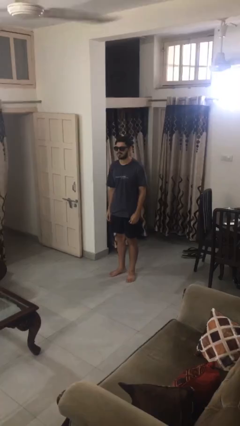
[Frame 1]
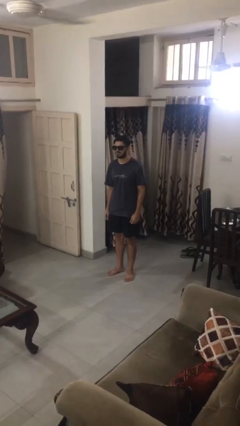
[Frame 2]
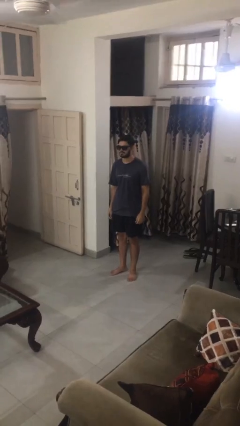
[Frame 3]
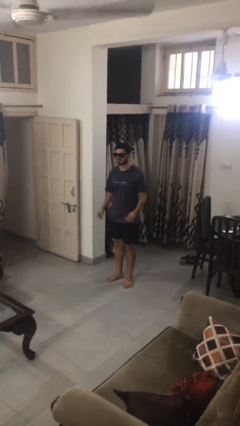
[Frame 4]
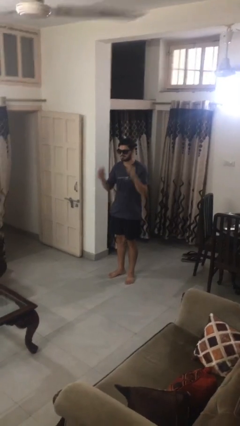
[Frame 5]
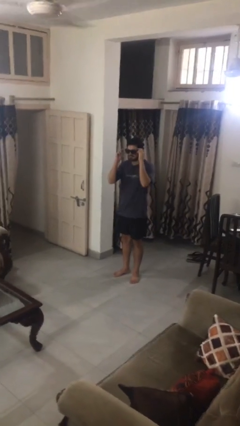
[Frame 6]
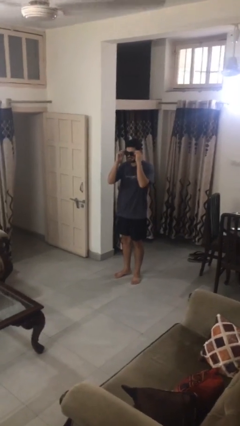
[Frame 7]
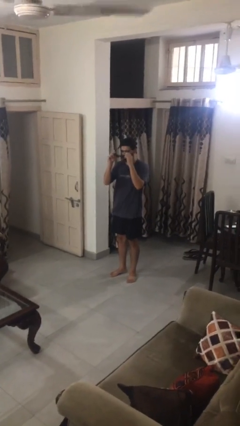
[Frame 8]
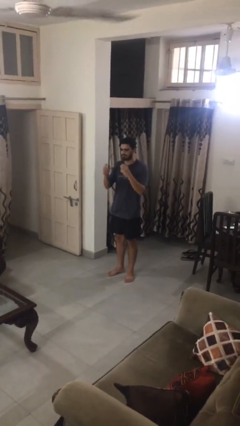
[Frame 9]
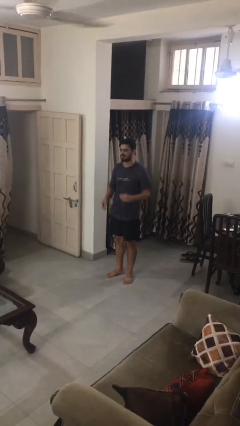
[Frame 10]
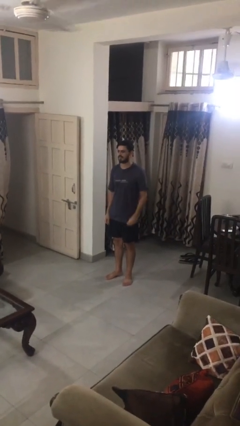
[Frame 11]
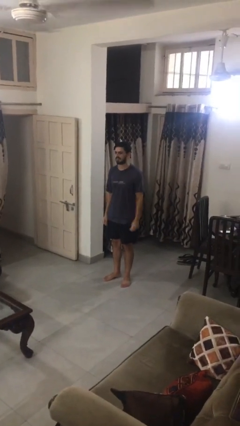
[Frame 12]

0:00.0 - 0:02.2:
person takes off sunglasses

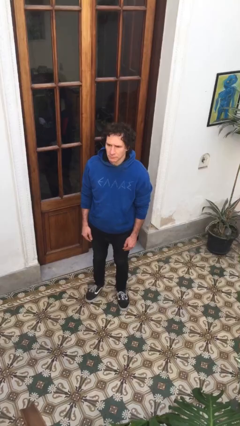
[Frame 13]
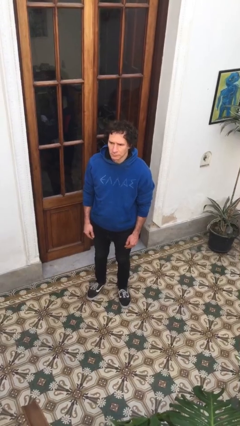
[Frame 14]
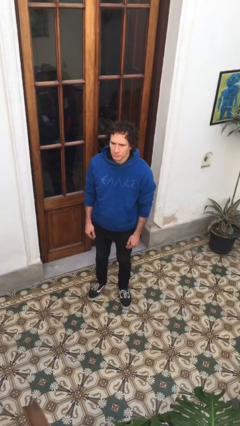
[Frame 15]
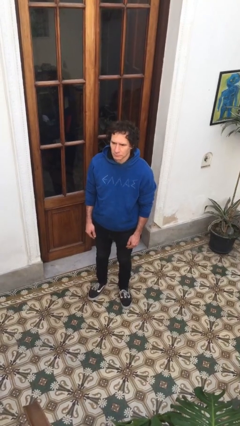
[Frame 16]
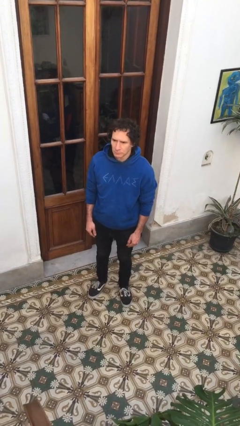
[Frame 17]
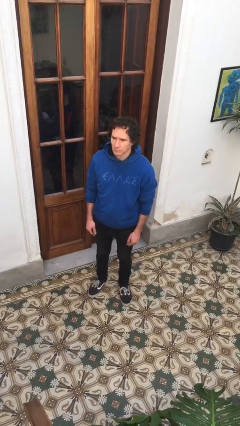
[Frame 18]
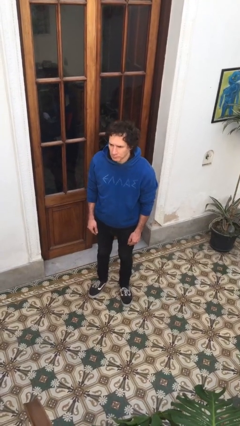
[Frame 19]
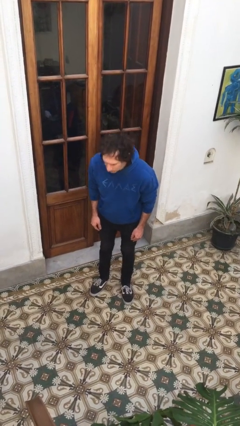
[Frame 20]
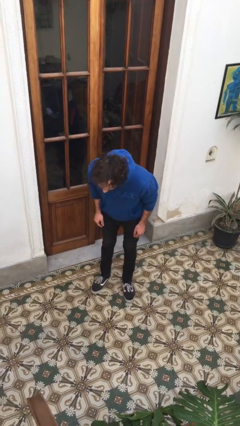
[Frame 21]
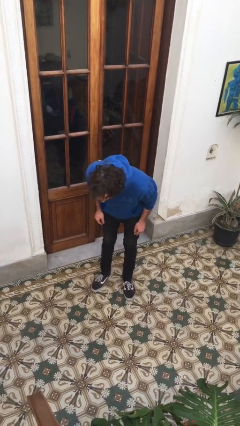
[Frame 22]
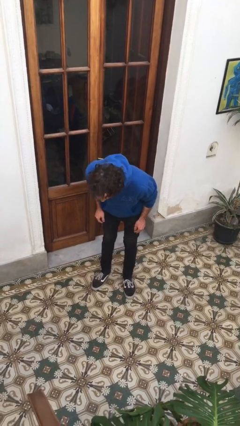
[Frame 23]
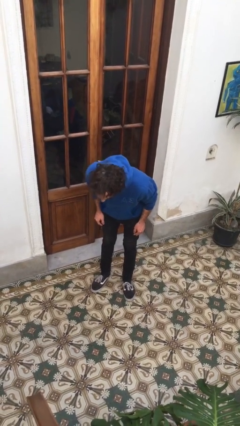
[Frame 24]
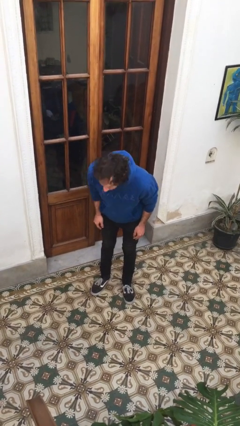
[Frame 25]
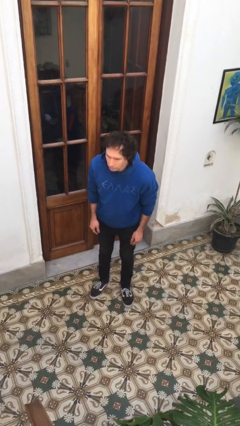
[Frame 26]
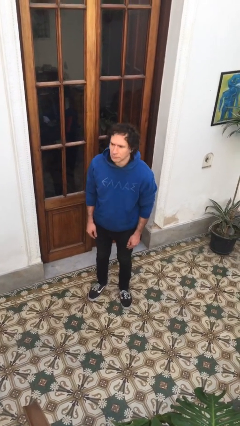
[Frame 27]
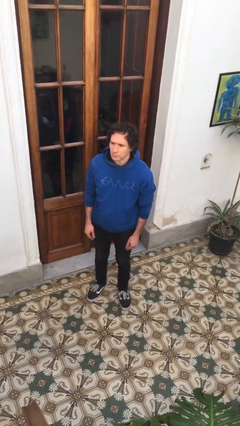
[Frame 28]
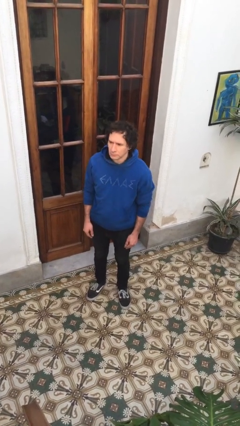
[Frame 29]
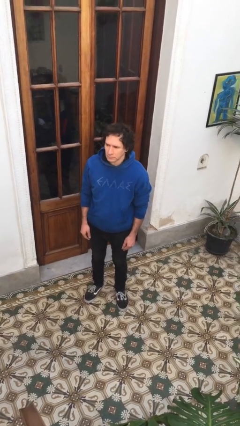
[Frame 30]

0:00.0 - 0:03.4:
person bows

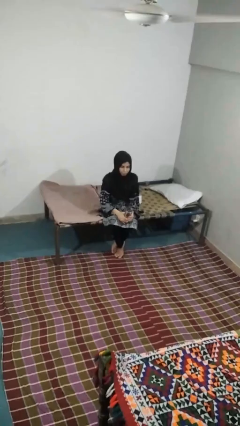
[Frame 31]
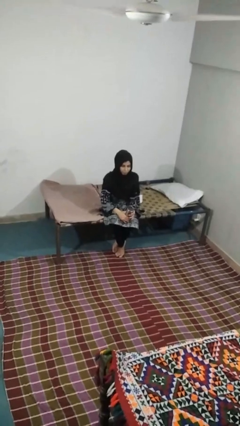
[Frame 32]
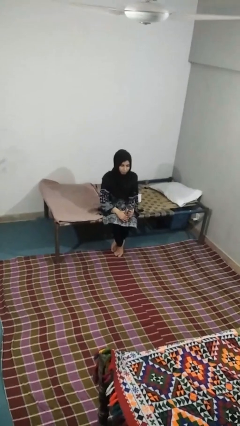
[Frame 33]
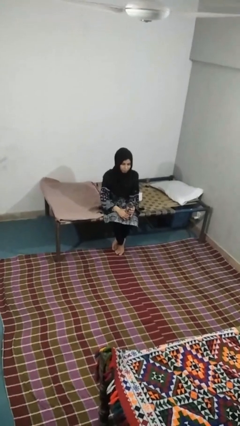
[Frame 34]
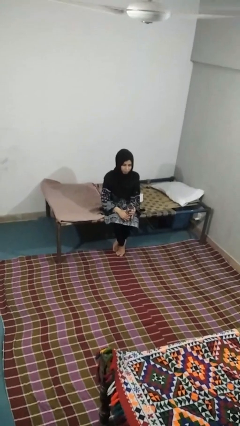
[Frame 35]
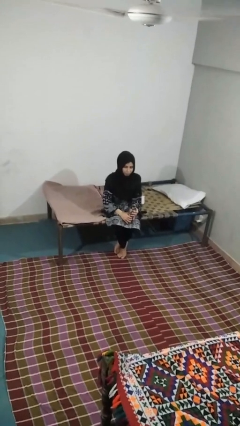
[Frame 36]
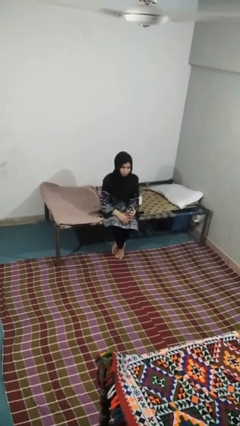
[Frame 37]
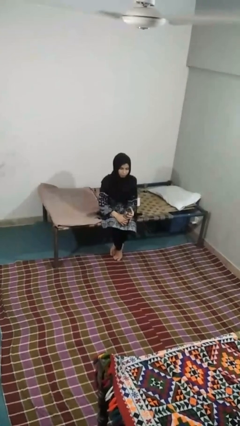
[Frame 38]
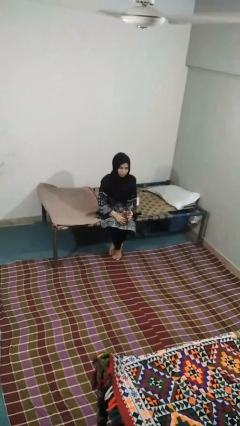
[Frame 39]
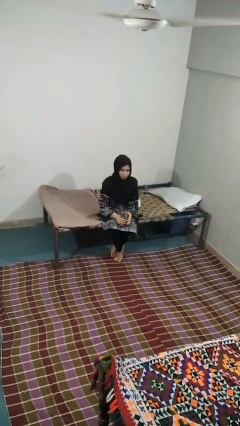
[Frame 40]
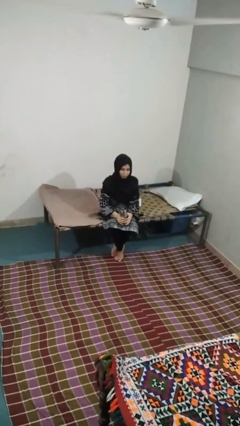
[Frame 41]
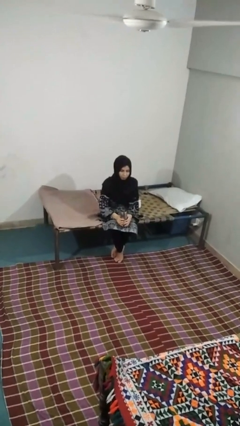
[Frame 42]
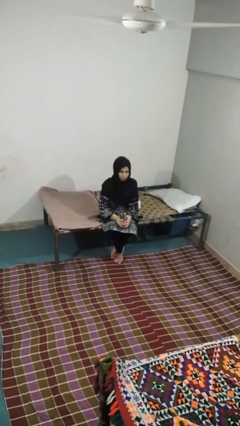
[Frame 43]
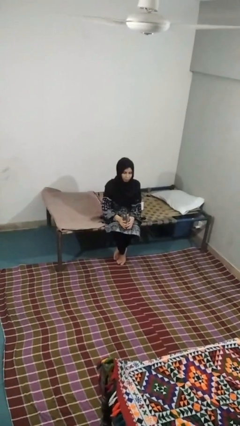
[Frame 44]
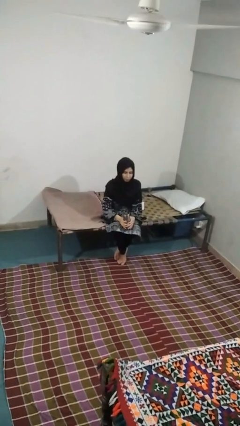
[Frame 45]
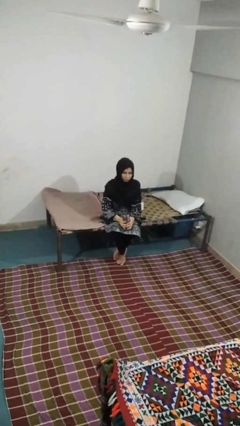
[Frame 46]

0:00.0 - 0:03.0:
person opens beverage can

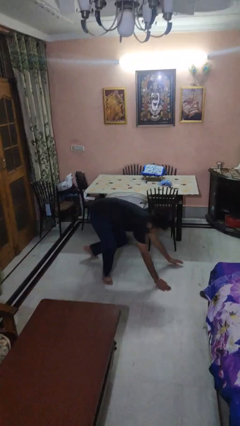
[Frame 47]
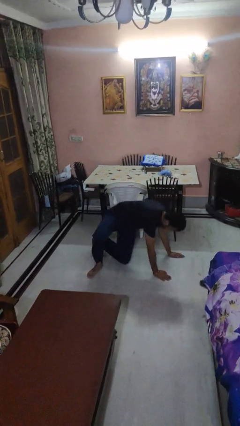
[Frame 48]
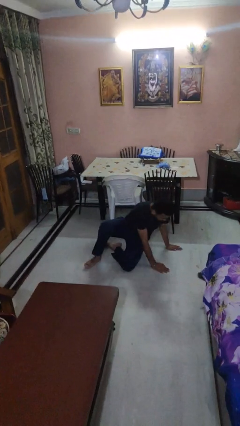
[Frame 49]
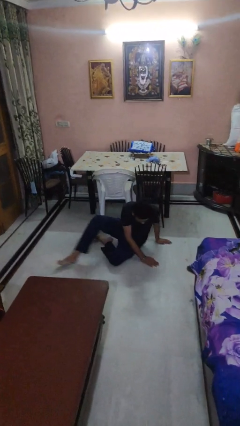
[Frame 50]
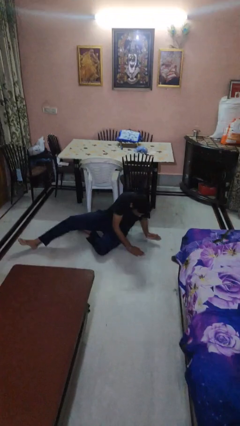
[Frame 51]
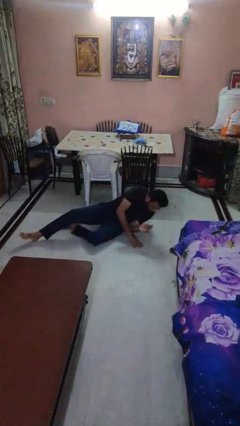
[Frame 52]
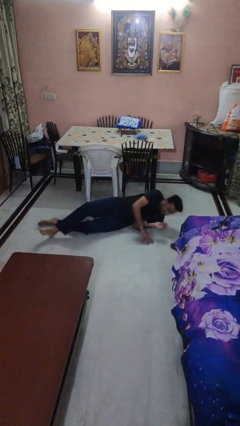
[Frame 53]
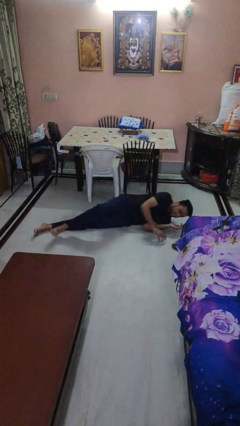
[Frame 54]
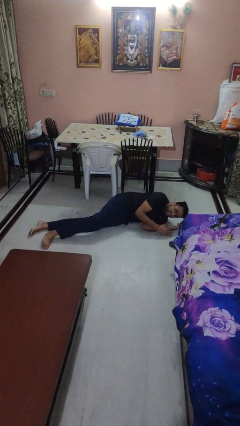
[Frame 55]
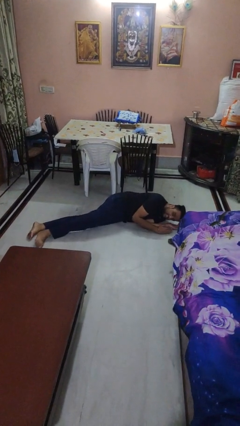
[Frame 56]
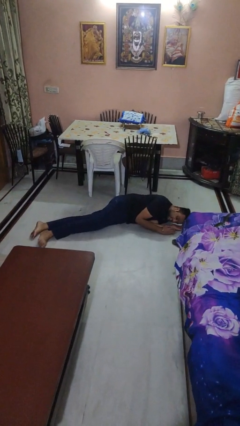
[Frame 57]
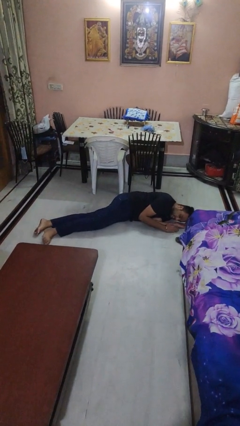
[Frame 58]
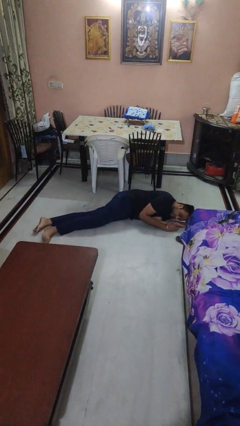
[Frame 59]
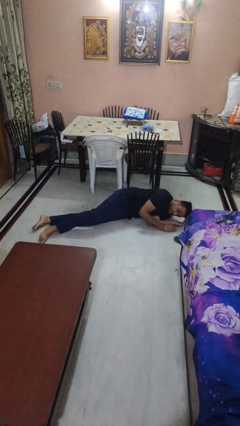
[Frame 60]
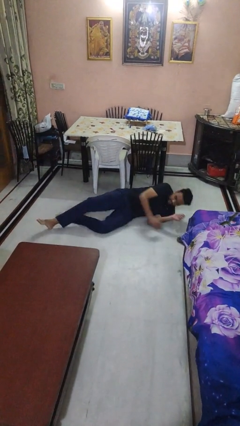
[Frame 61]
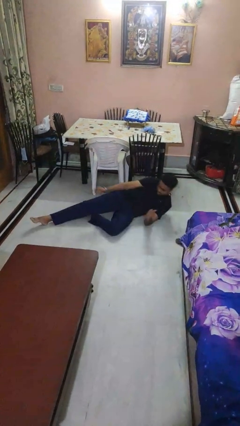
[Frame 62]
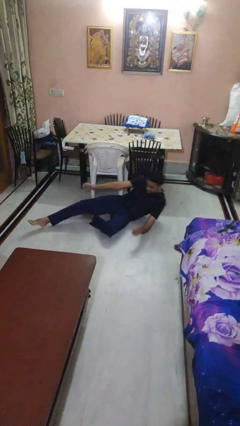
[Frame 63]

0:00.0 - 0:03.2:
person lies down on floor

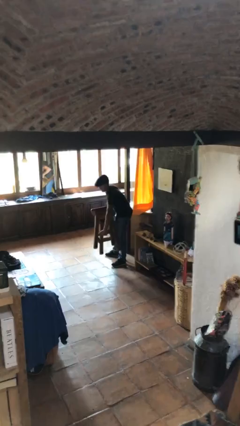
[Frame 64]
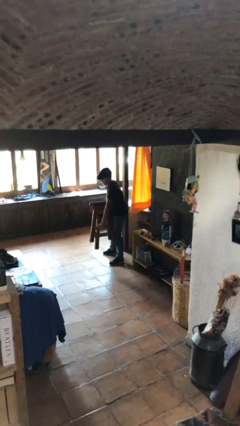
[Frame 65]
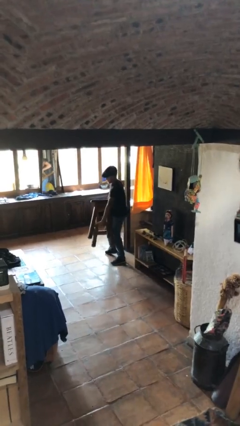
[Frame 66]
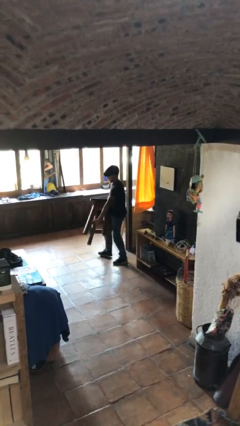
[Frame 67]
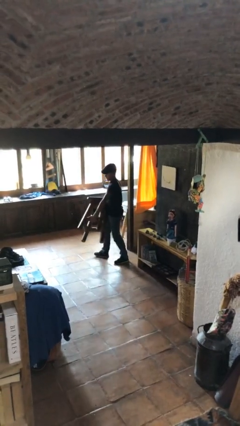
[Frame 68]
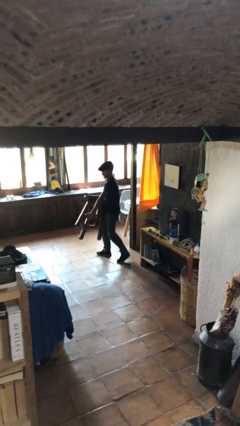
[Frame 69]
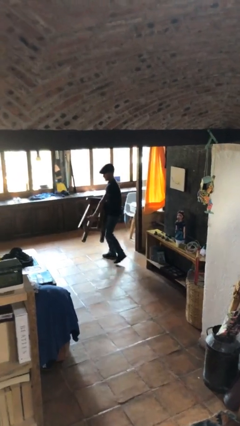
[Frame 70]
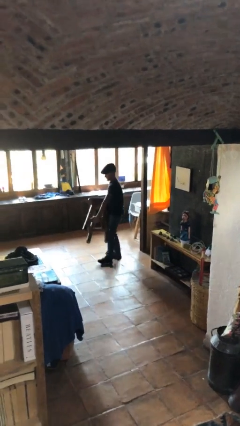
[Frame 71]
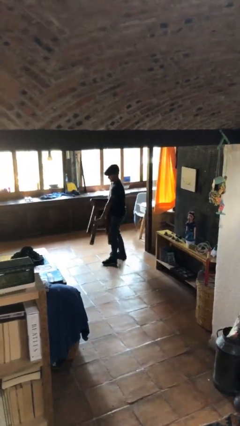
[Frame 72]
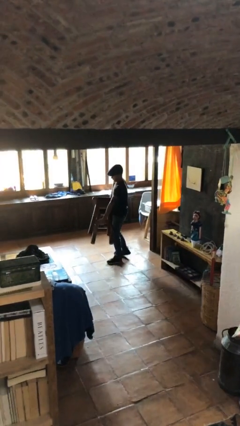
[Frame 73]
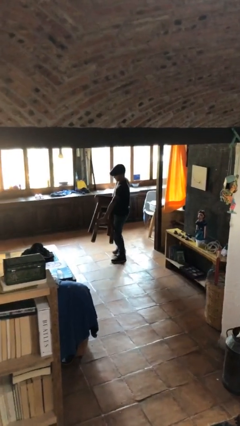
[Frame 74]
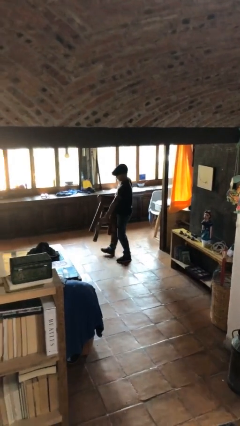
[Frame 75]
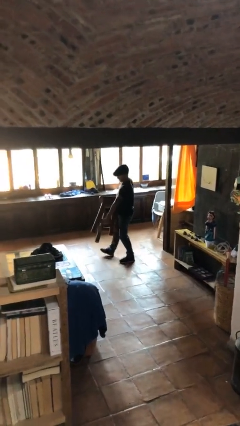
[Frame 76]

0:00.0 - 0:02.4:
person carries heavy object

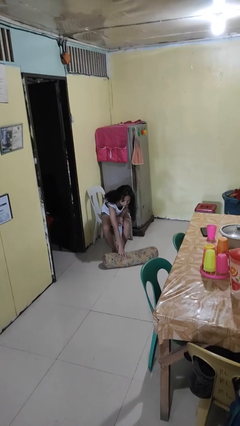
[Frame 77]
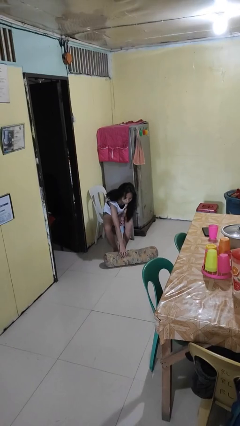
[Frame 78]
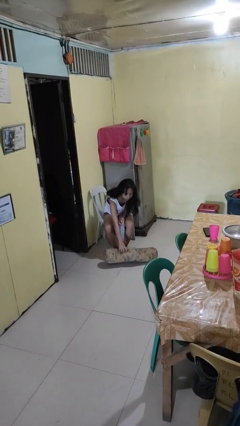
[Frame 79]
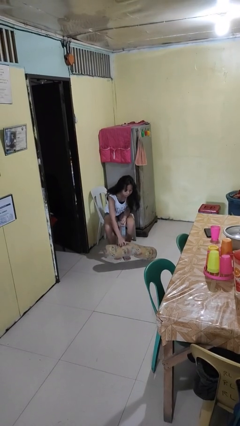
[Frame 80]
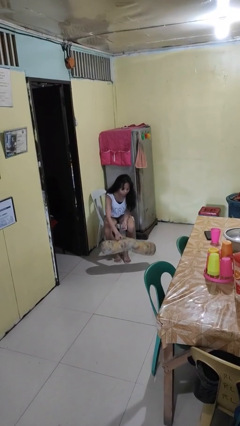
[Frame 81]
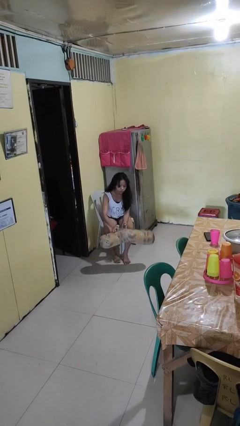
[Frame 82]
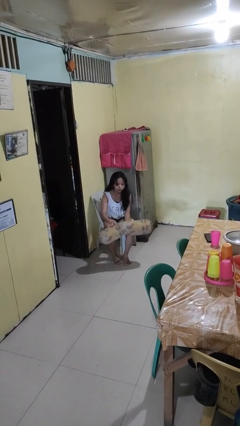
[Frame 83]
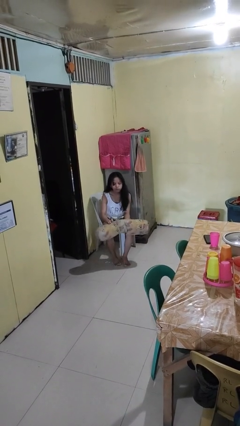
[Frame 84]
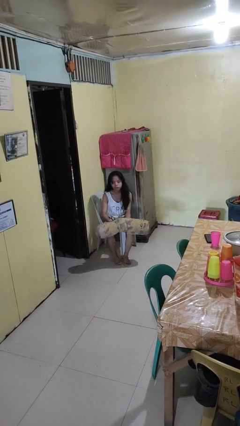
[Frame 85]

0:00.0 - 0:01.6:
person picks up object from floor

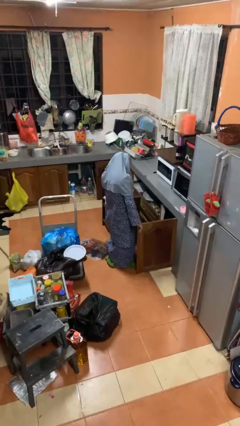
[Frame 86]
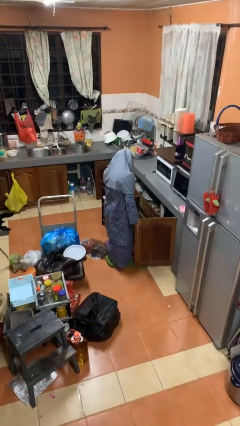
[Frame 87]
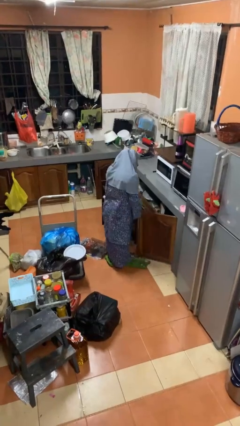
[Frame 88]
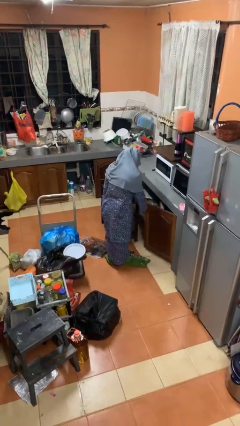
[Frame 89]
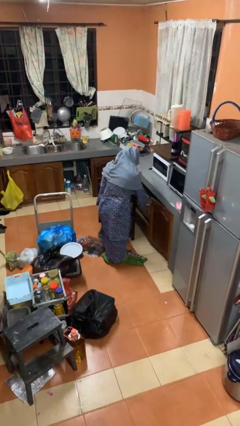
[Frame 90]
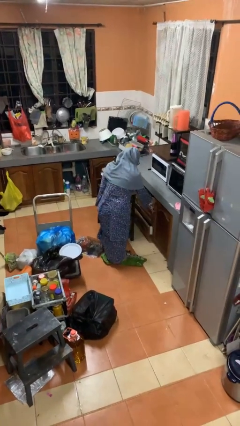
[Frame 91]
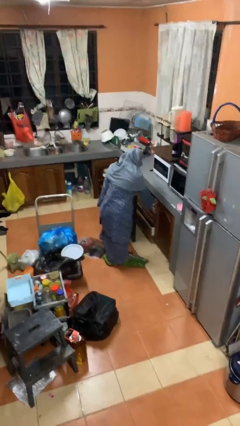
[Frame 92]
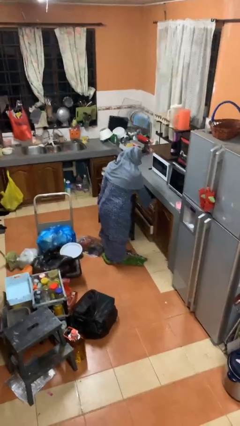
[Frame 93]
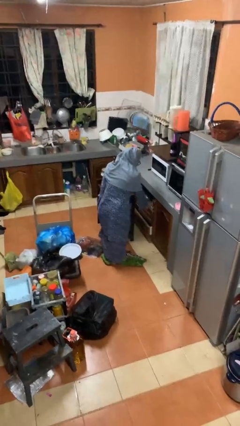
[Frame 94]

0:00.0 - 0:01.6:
person closes cabinet
